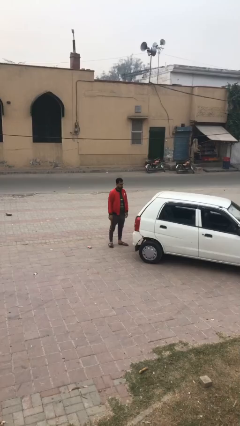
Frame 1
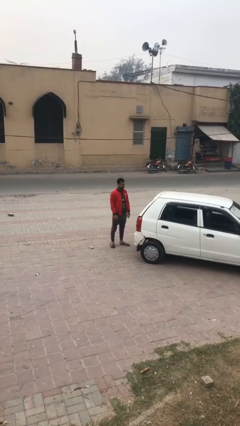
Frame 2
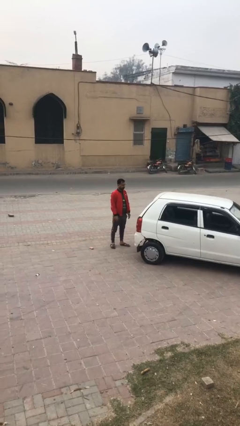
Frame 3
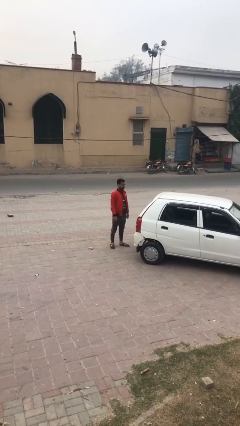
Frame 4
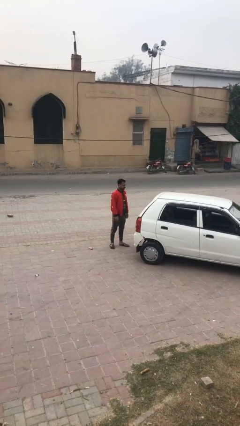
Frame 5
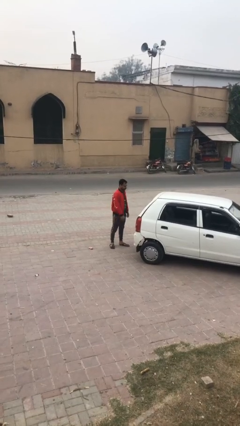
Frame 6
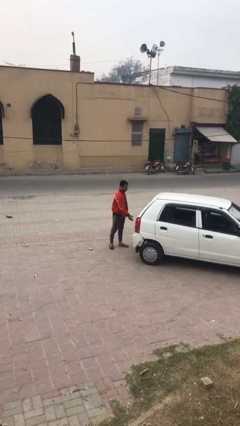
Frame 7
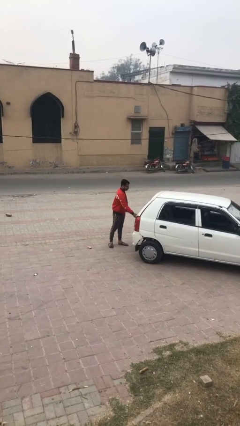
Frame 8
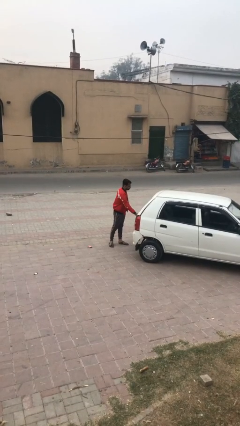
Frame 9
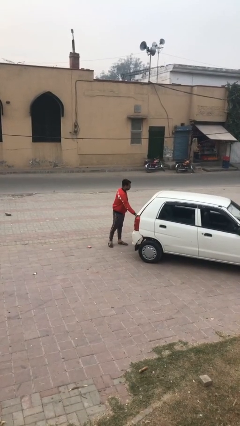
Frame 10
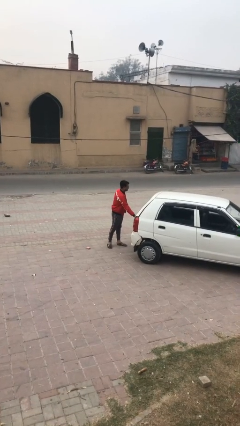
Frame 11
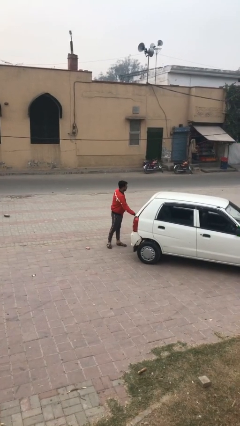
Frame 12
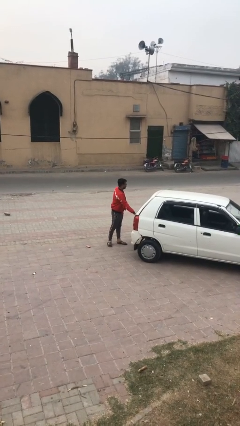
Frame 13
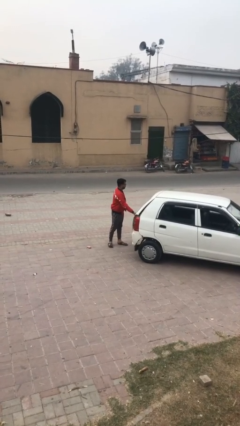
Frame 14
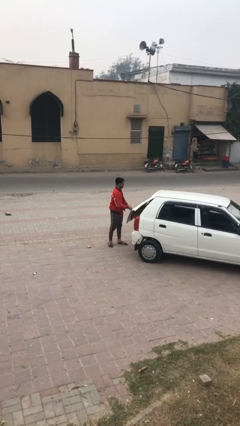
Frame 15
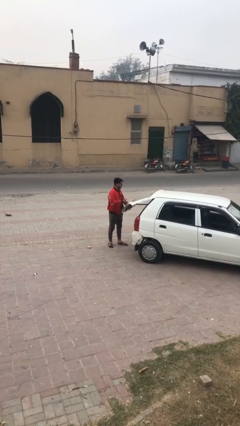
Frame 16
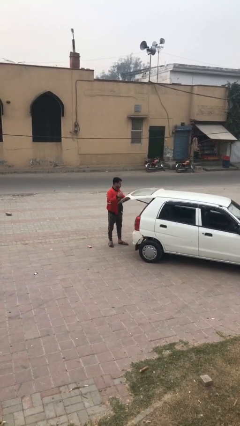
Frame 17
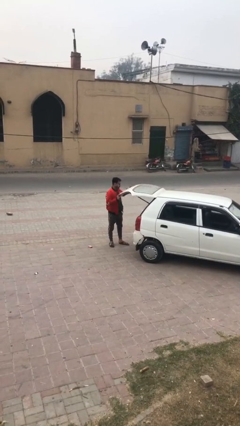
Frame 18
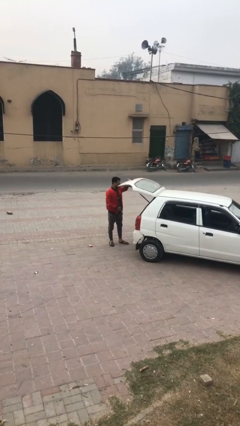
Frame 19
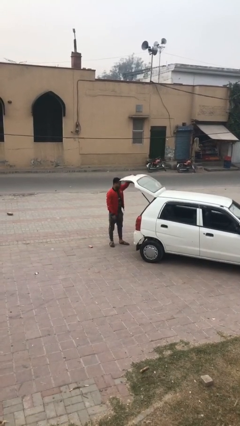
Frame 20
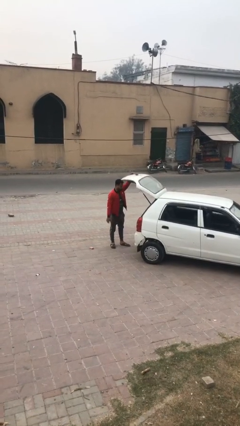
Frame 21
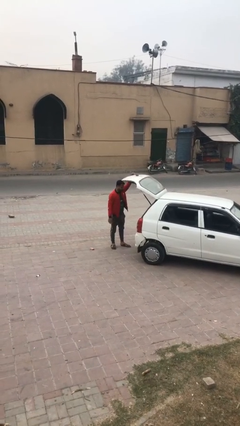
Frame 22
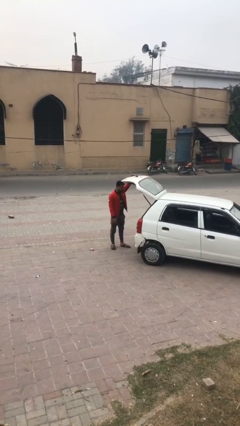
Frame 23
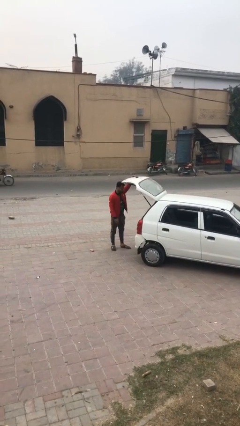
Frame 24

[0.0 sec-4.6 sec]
person opens car trunk

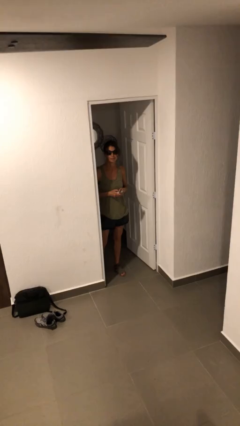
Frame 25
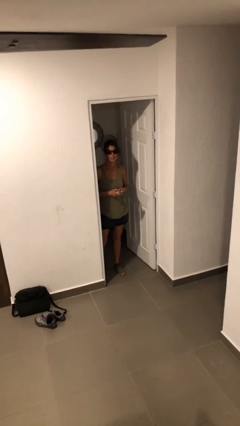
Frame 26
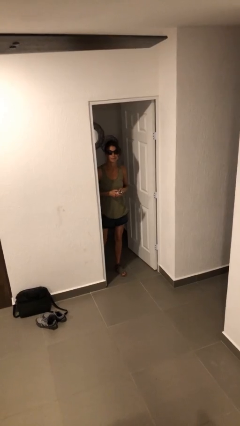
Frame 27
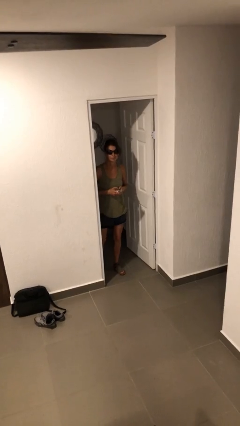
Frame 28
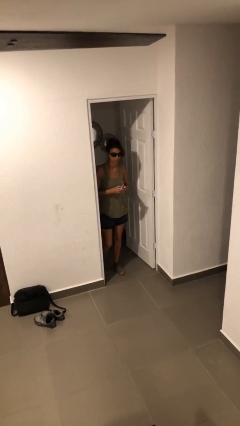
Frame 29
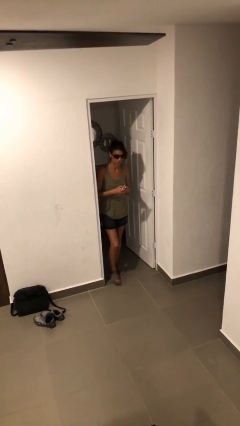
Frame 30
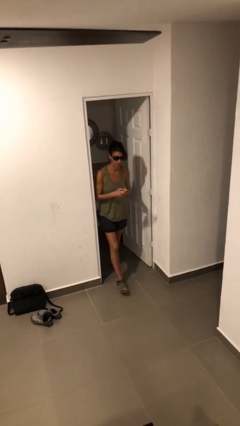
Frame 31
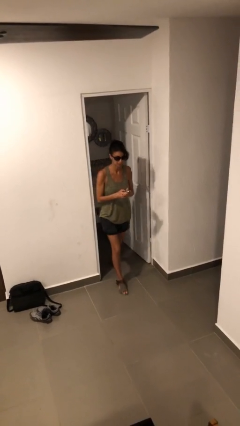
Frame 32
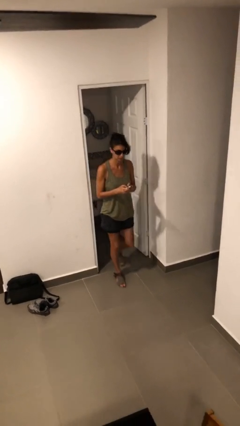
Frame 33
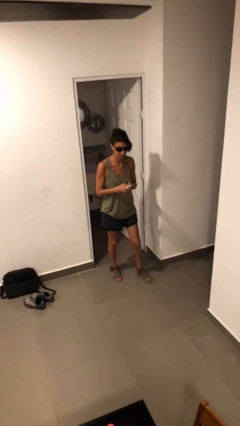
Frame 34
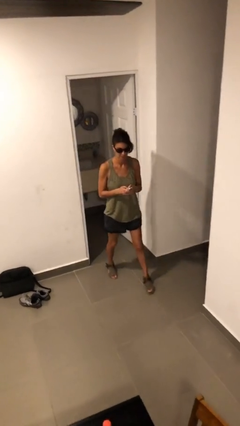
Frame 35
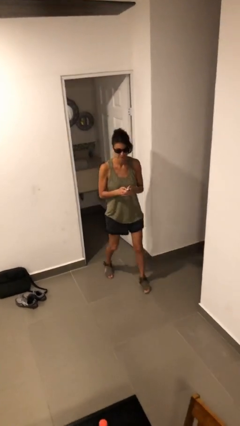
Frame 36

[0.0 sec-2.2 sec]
person enters scene through structure

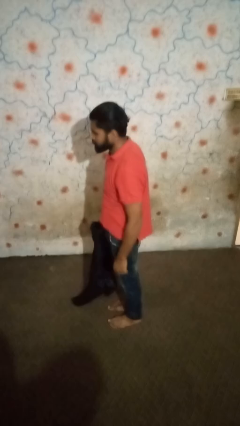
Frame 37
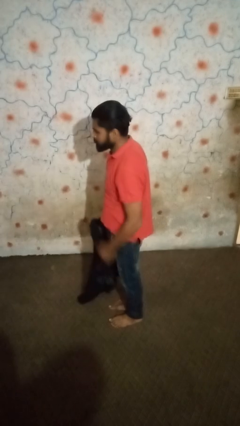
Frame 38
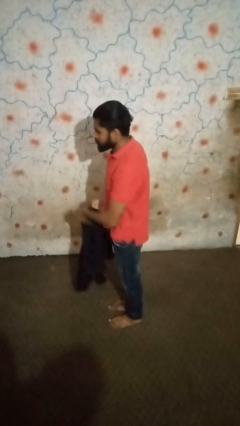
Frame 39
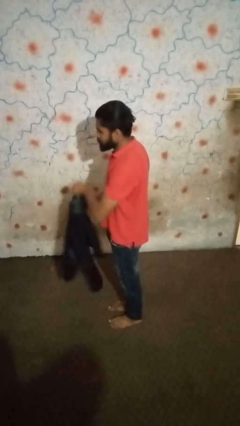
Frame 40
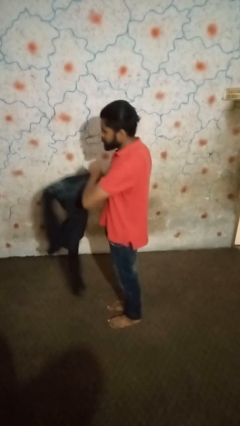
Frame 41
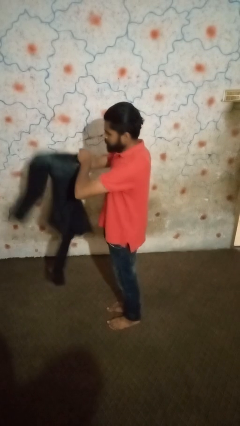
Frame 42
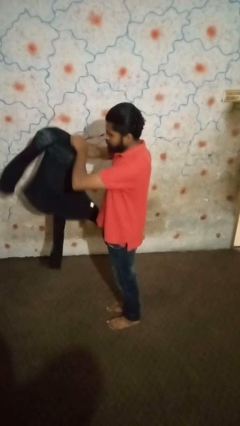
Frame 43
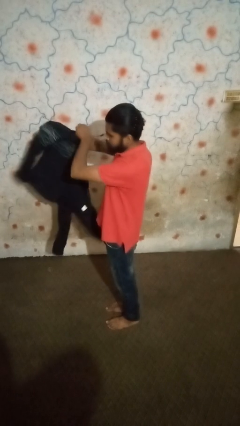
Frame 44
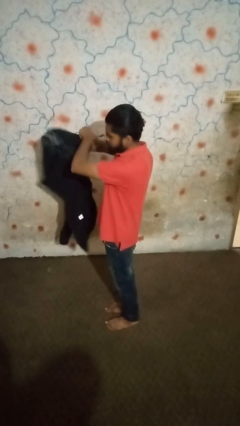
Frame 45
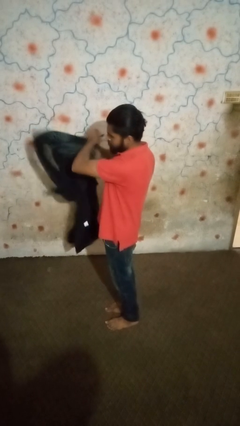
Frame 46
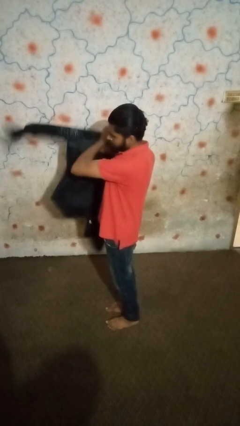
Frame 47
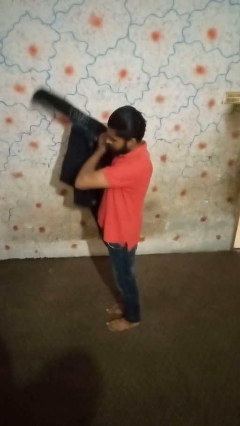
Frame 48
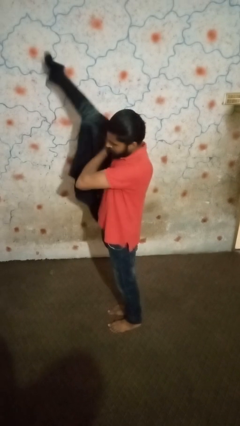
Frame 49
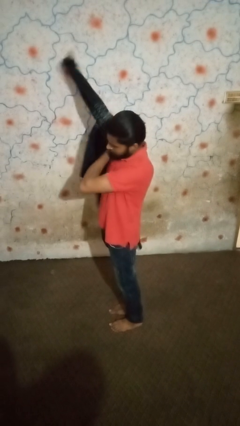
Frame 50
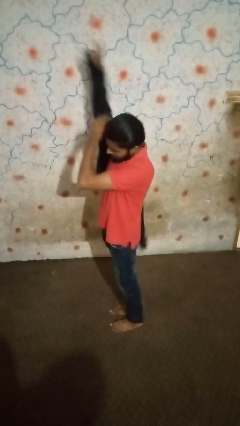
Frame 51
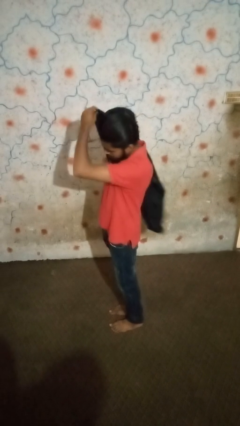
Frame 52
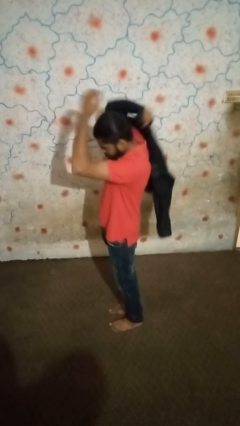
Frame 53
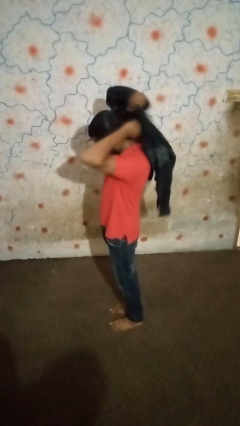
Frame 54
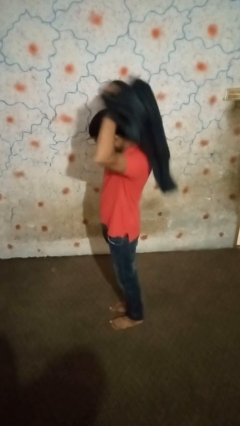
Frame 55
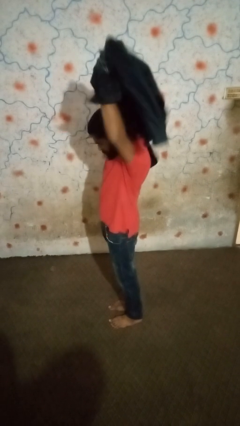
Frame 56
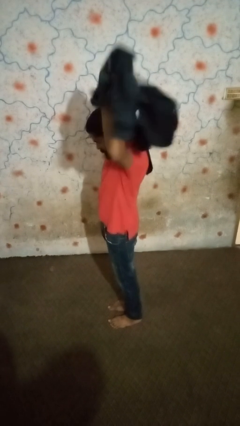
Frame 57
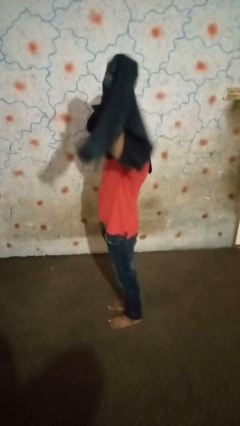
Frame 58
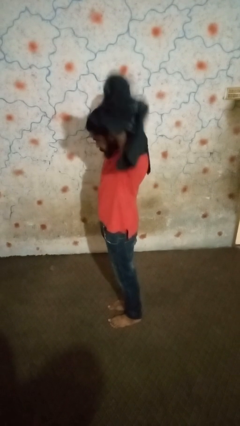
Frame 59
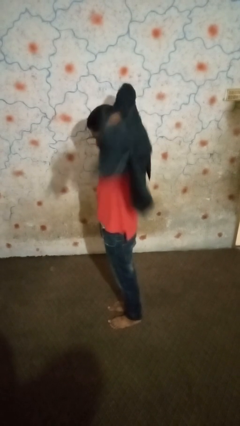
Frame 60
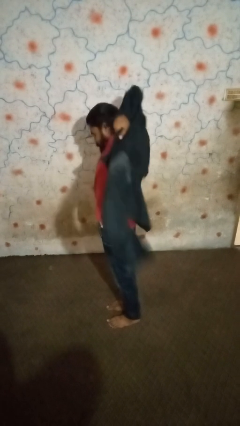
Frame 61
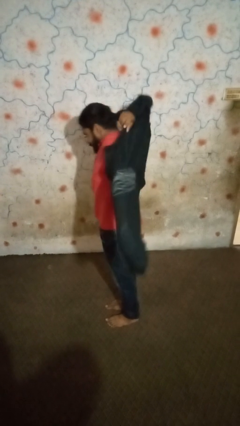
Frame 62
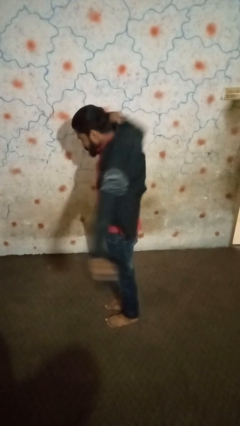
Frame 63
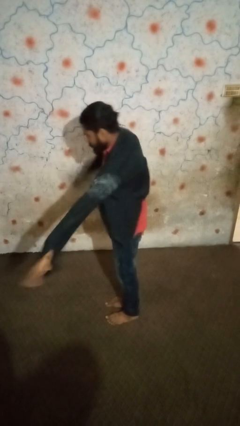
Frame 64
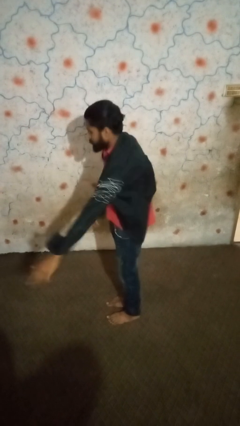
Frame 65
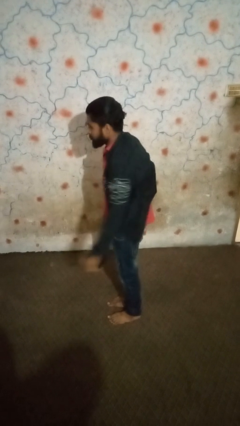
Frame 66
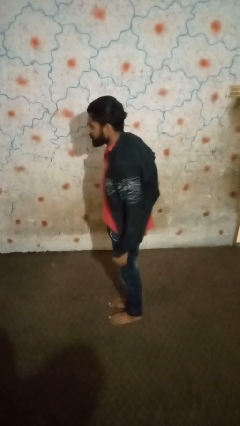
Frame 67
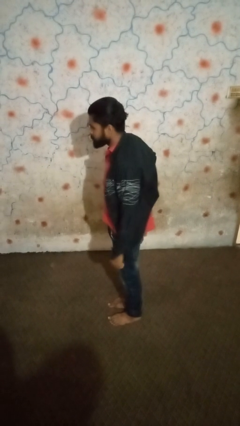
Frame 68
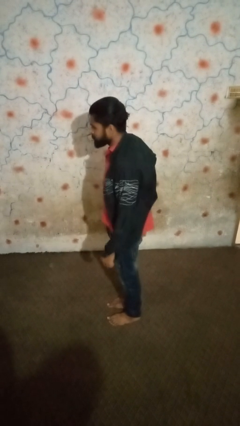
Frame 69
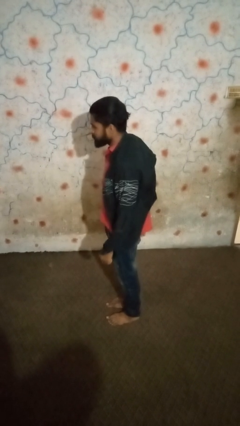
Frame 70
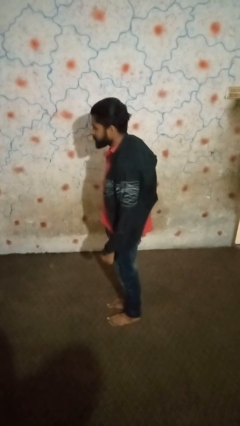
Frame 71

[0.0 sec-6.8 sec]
person puts on shirt

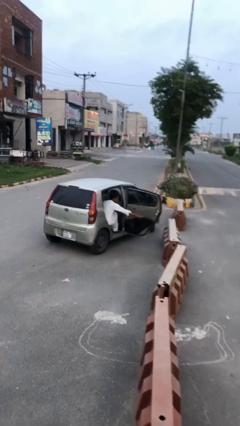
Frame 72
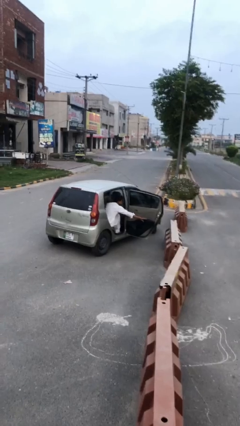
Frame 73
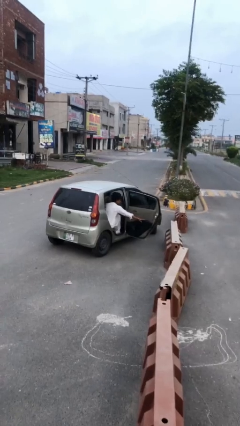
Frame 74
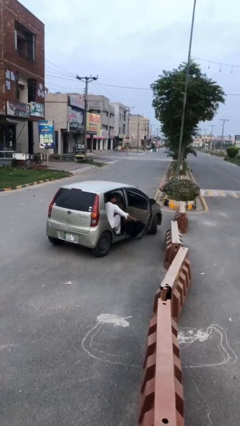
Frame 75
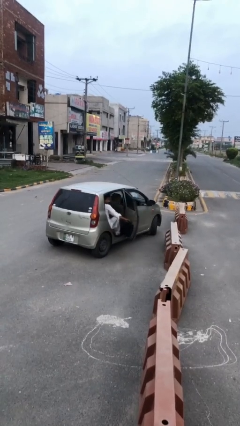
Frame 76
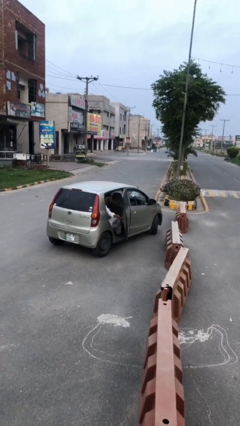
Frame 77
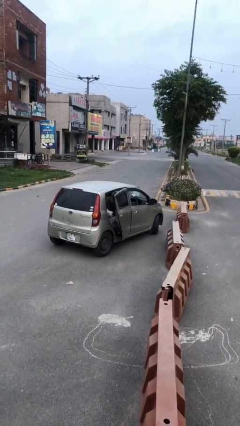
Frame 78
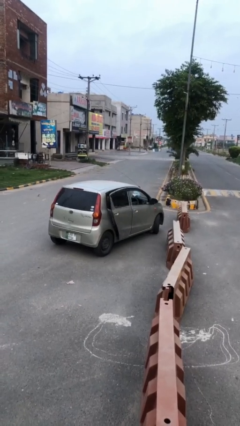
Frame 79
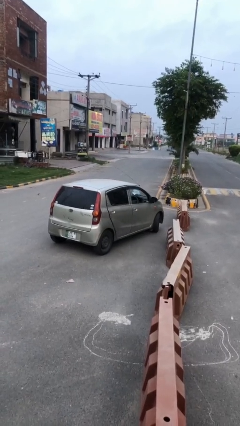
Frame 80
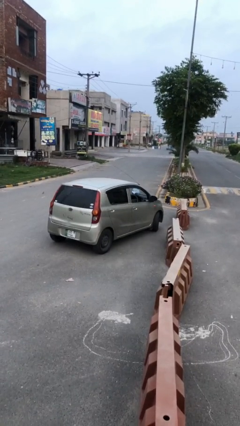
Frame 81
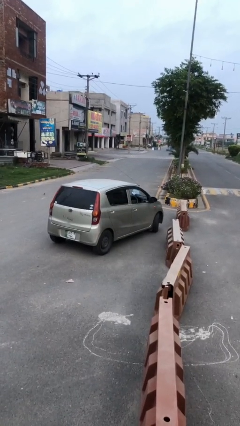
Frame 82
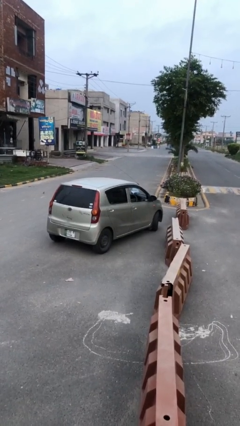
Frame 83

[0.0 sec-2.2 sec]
person closes car door

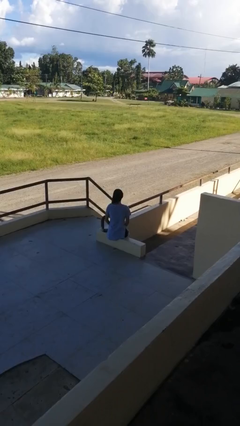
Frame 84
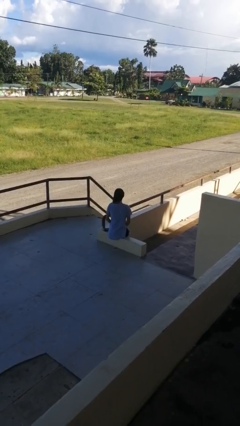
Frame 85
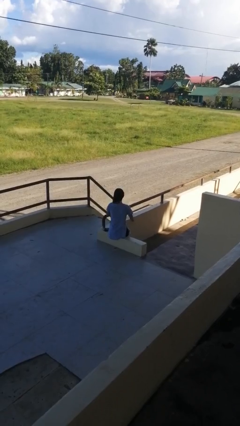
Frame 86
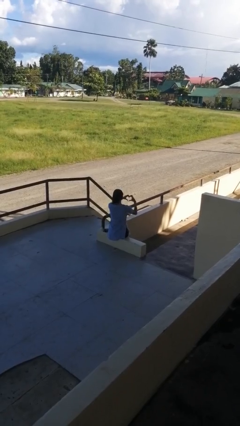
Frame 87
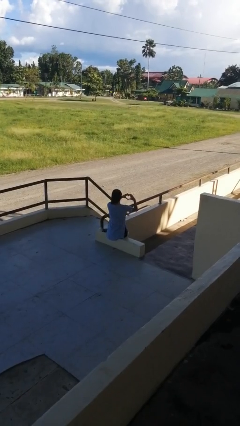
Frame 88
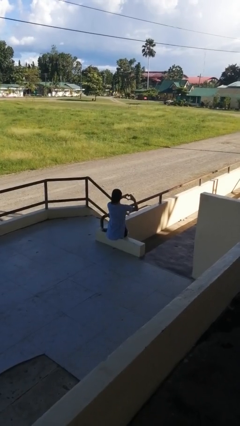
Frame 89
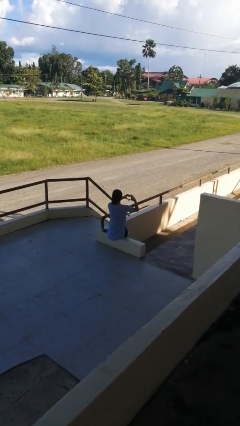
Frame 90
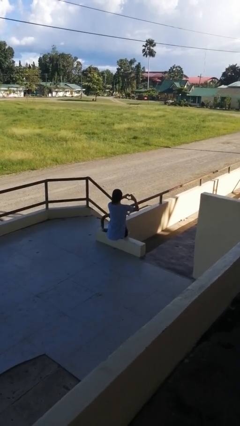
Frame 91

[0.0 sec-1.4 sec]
person gestures heart

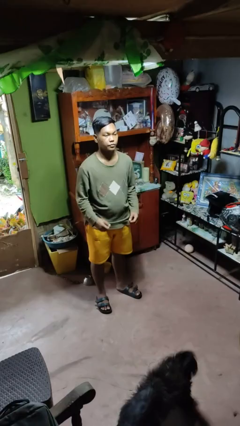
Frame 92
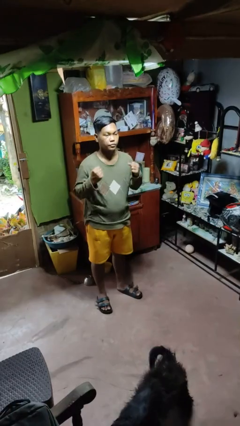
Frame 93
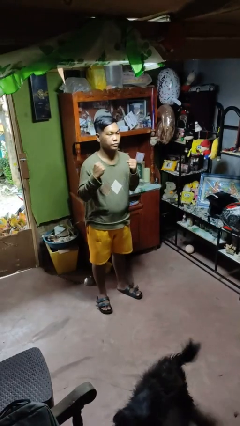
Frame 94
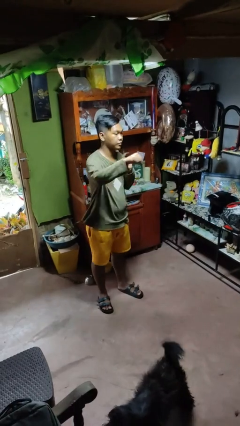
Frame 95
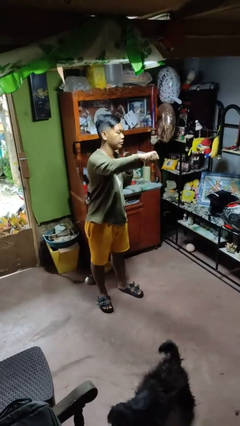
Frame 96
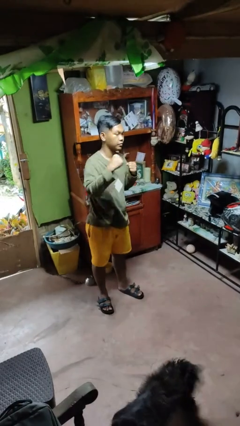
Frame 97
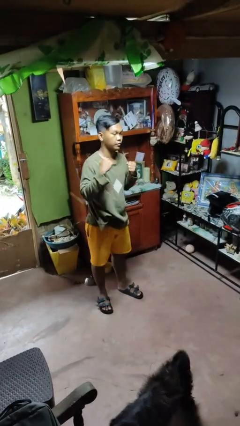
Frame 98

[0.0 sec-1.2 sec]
person punches
